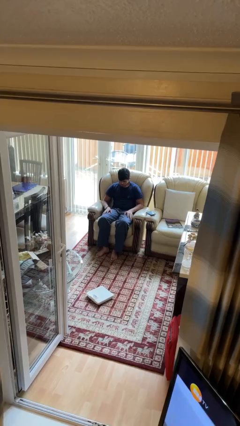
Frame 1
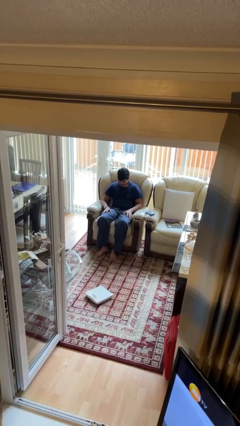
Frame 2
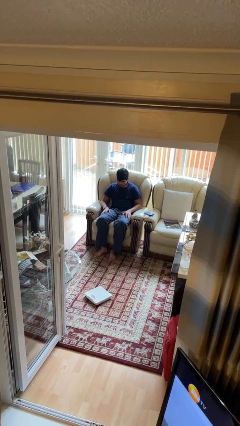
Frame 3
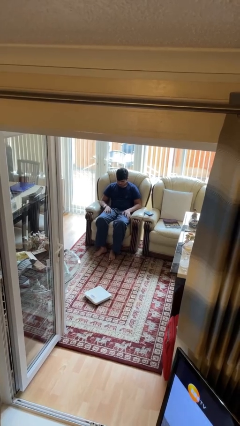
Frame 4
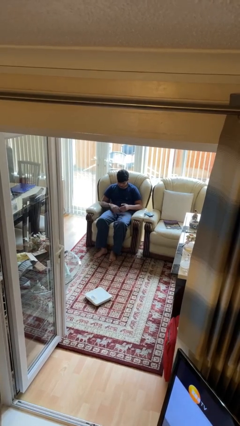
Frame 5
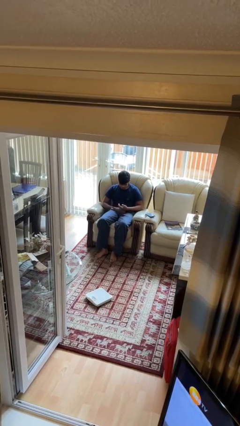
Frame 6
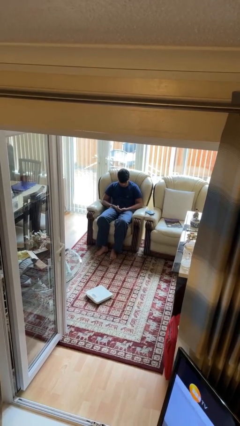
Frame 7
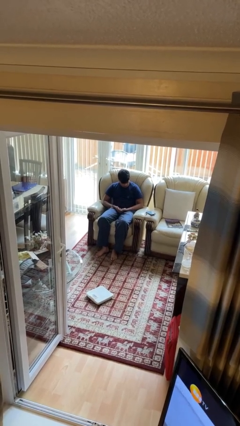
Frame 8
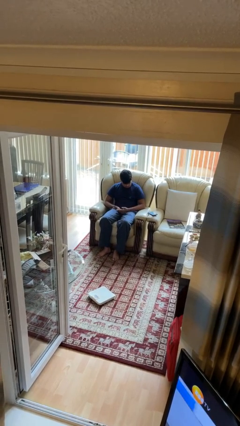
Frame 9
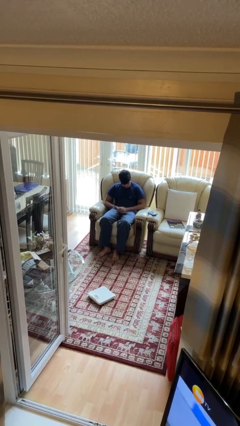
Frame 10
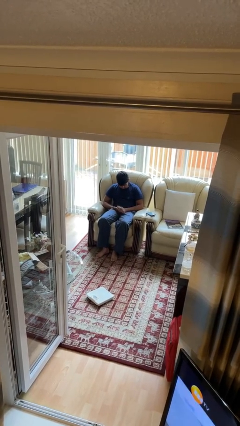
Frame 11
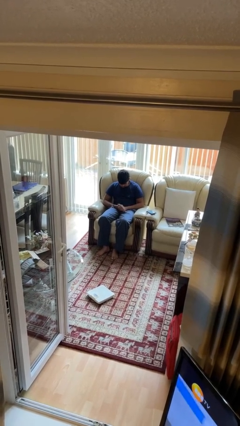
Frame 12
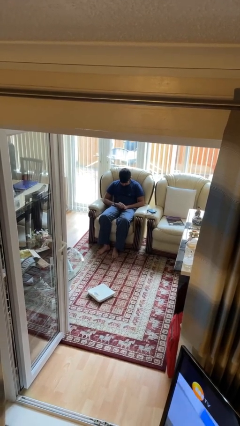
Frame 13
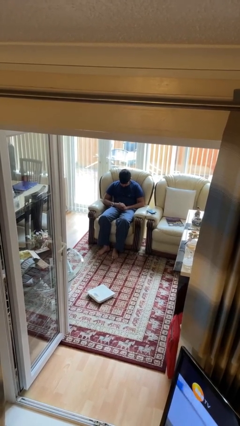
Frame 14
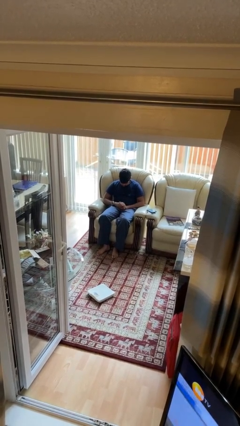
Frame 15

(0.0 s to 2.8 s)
person looks at hands in lap

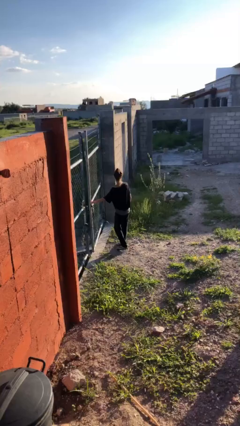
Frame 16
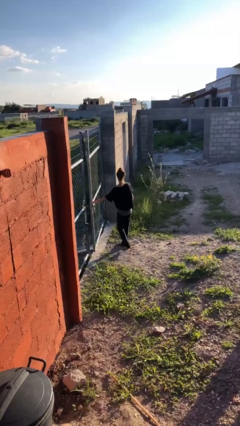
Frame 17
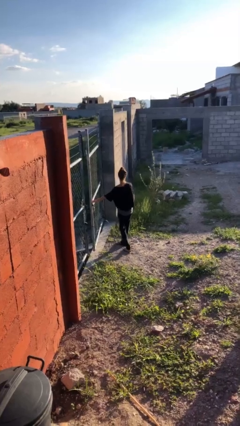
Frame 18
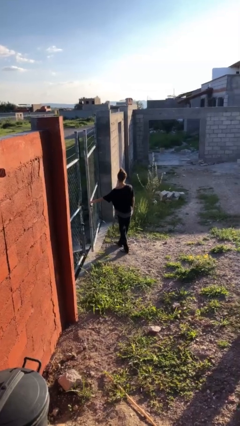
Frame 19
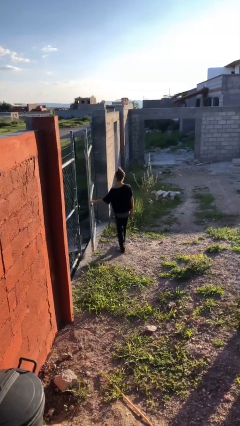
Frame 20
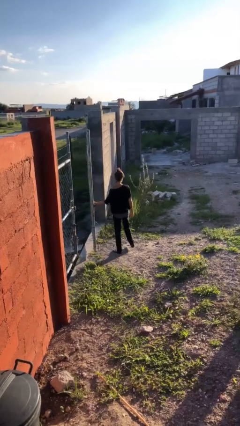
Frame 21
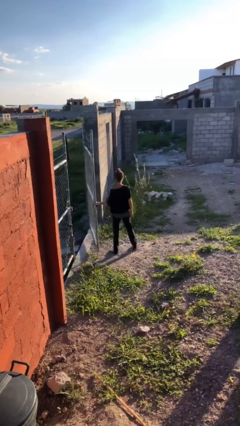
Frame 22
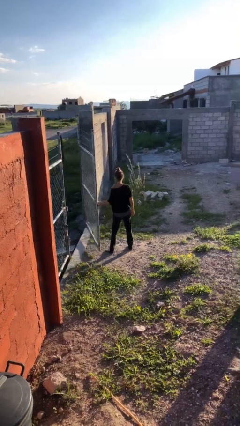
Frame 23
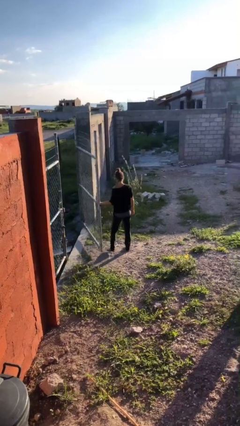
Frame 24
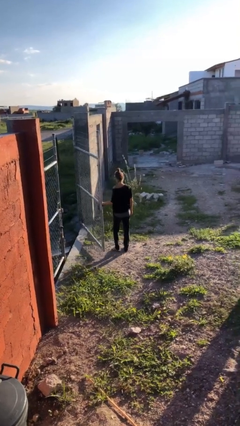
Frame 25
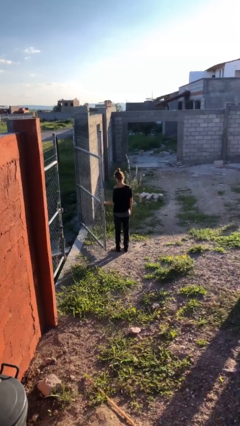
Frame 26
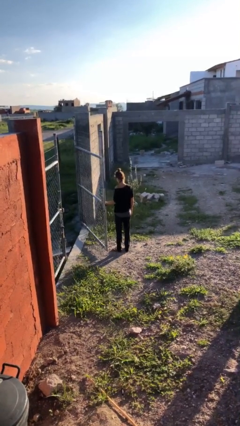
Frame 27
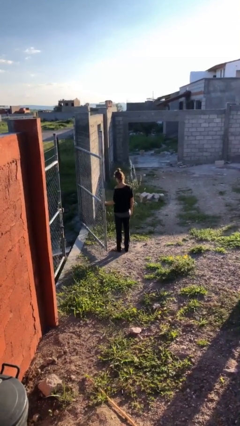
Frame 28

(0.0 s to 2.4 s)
person opens gate

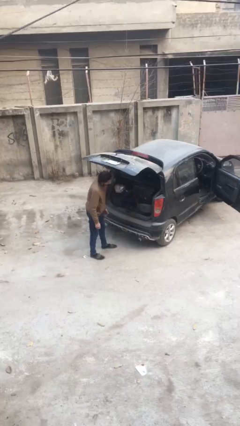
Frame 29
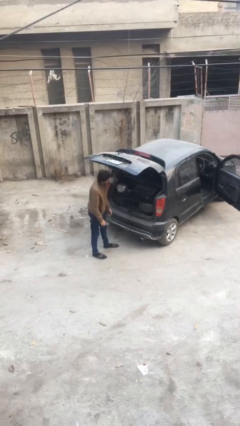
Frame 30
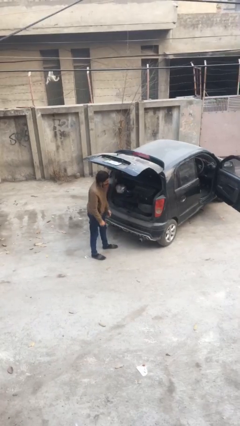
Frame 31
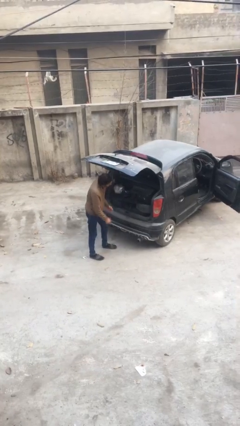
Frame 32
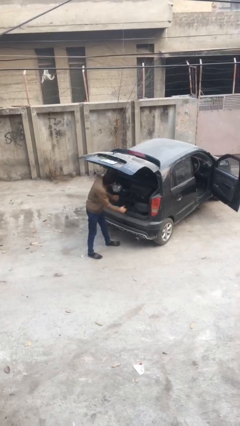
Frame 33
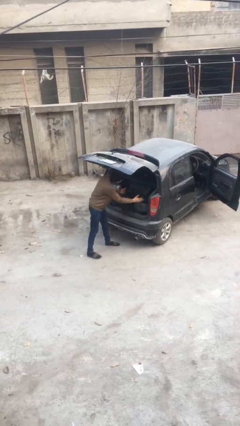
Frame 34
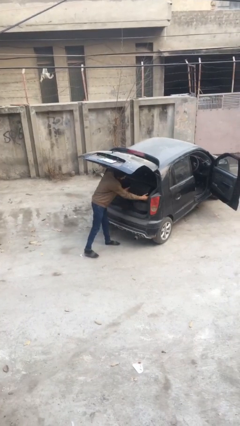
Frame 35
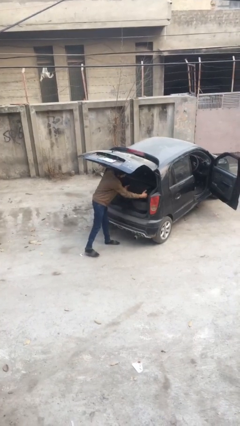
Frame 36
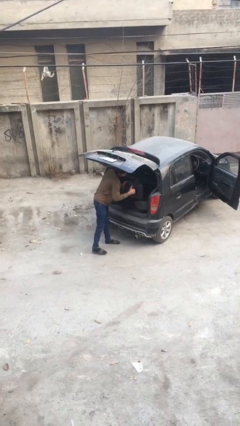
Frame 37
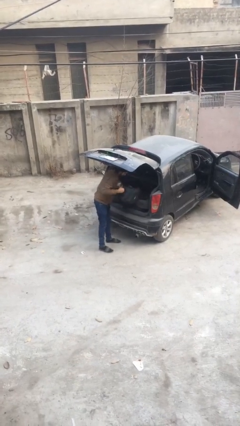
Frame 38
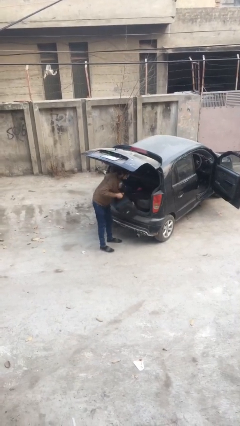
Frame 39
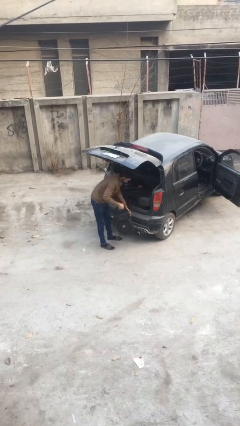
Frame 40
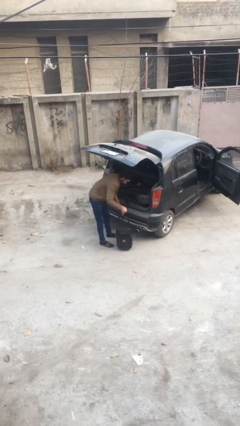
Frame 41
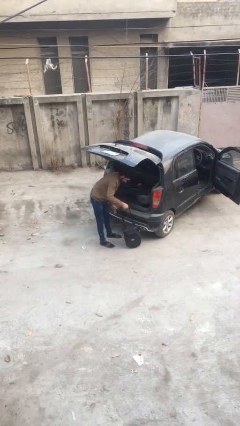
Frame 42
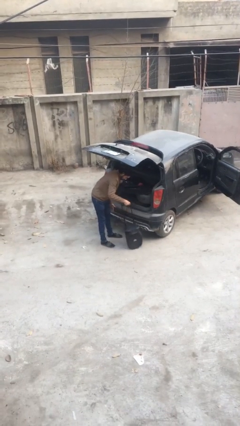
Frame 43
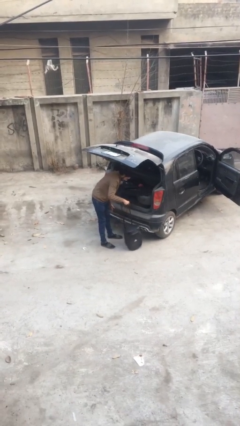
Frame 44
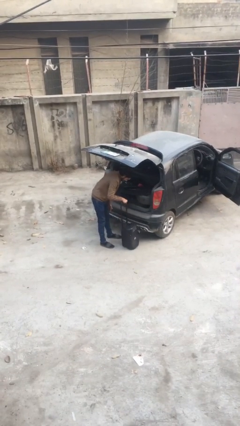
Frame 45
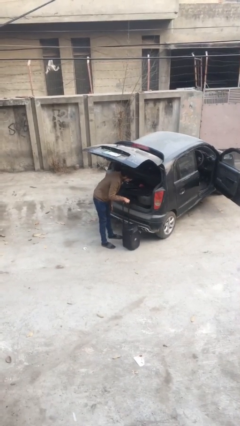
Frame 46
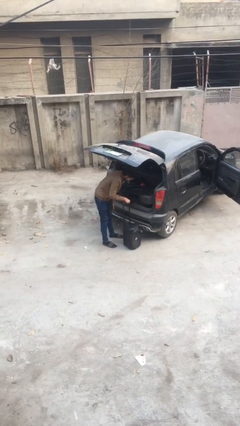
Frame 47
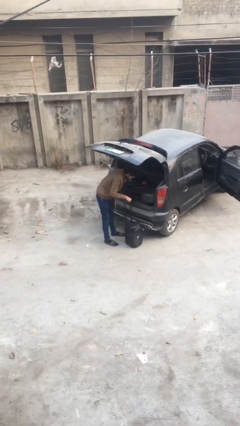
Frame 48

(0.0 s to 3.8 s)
person unloads car

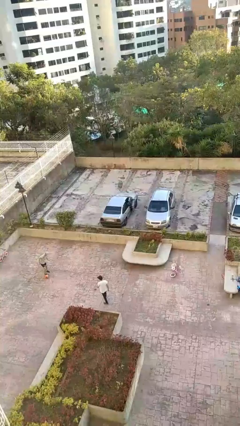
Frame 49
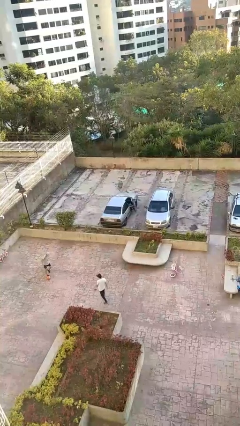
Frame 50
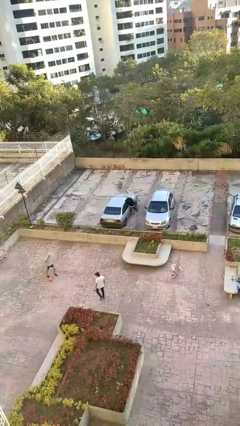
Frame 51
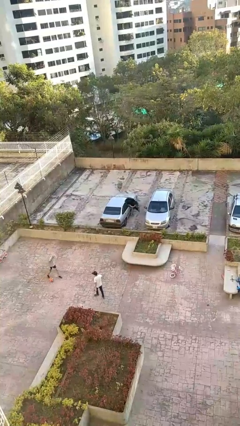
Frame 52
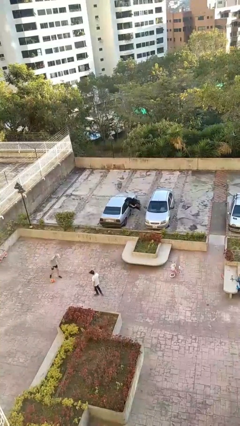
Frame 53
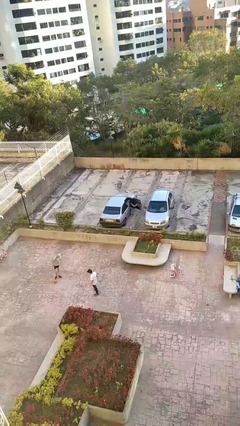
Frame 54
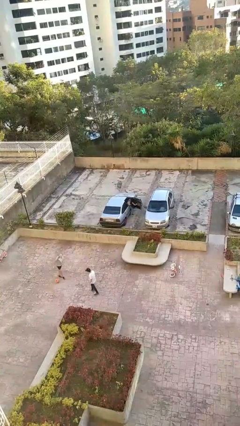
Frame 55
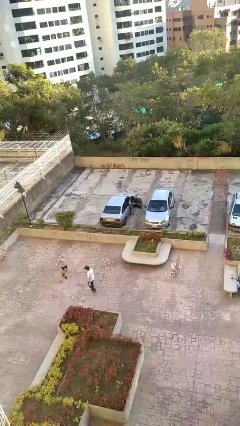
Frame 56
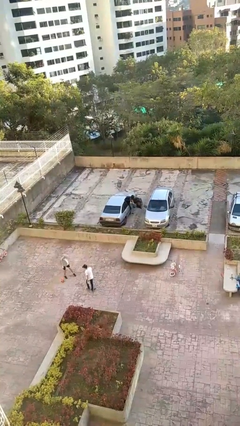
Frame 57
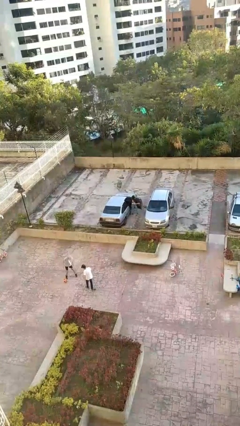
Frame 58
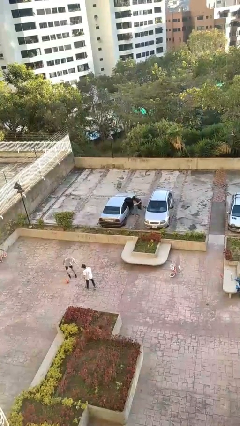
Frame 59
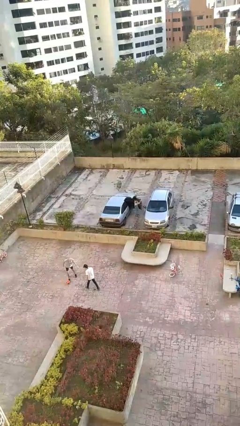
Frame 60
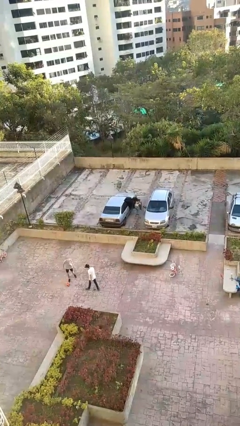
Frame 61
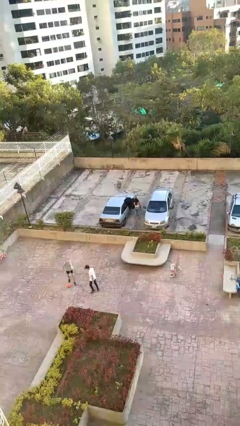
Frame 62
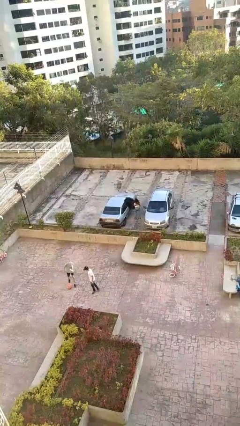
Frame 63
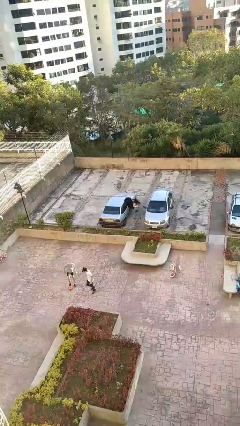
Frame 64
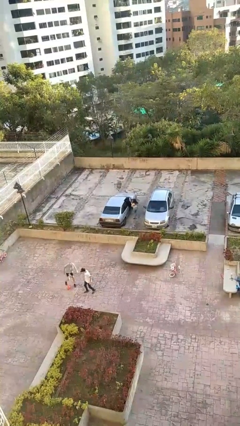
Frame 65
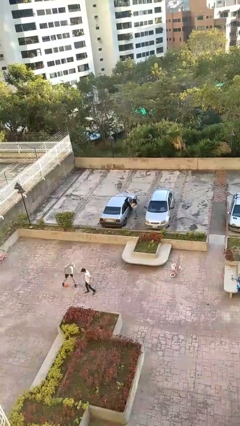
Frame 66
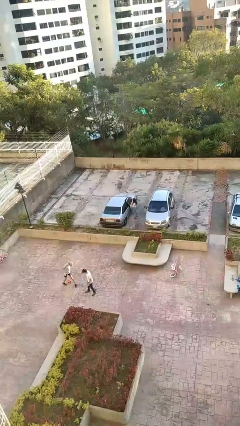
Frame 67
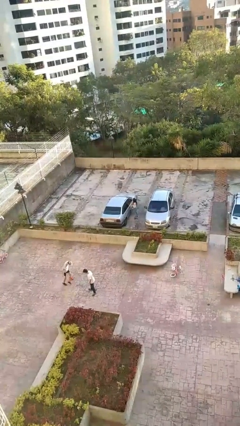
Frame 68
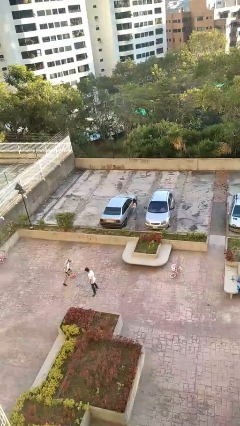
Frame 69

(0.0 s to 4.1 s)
car drops off person

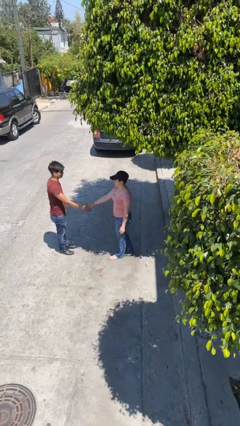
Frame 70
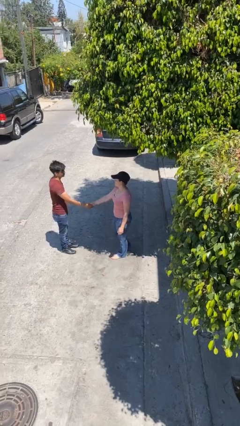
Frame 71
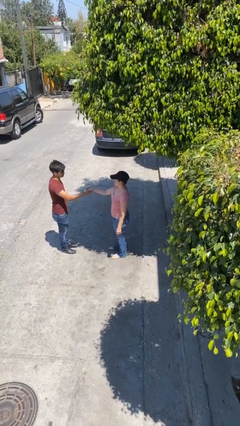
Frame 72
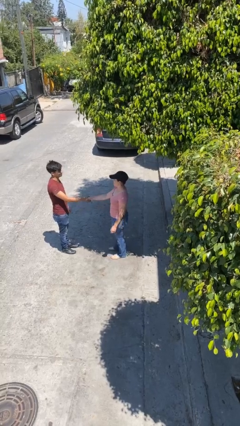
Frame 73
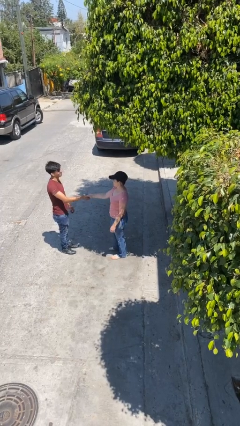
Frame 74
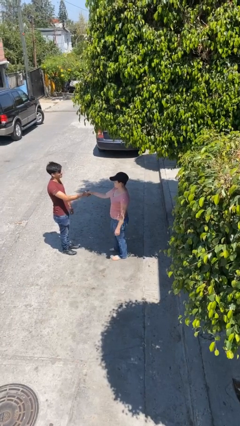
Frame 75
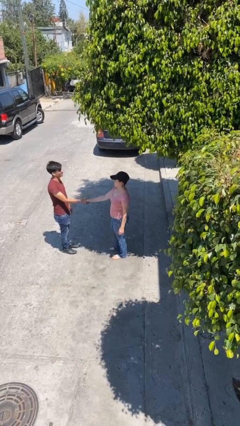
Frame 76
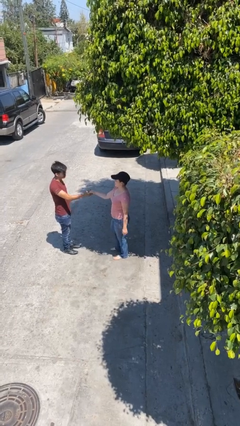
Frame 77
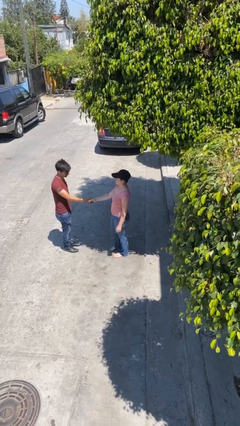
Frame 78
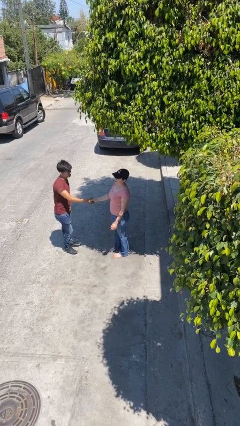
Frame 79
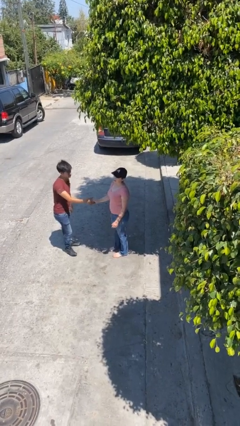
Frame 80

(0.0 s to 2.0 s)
person shakes hand

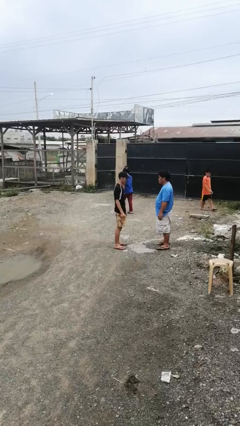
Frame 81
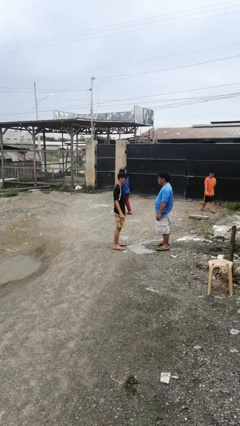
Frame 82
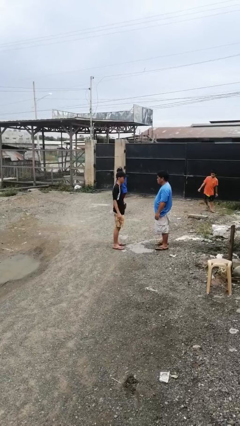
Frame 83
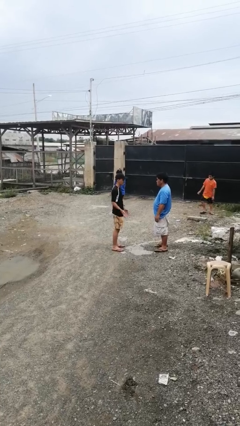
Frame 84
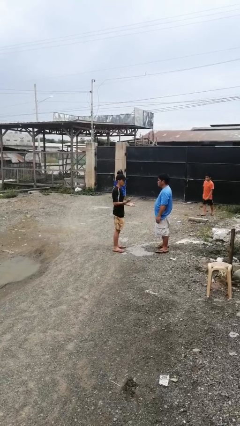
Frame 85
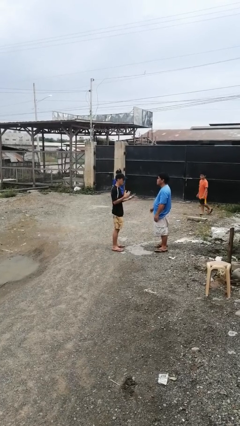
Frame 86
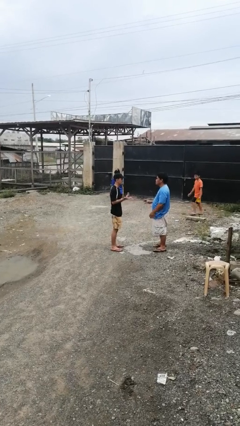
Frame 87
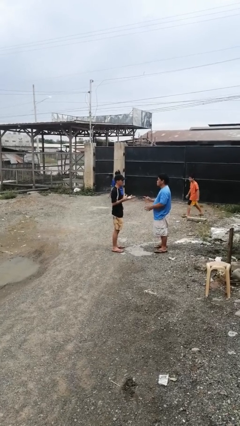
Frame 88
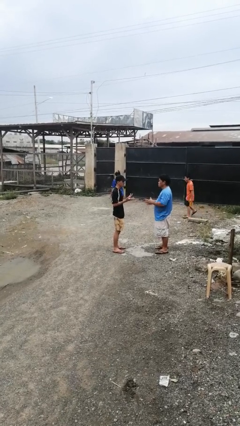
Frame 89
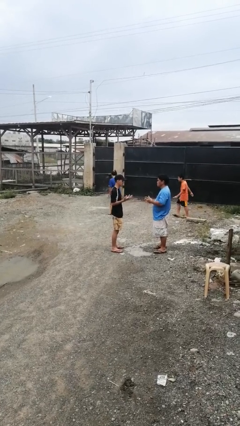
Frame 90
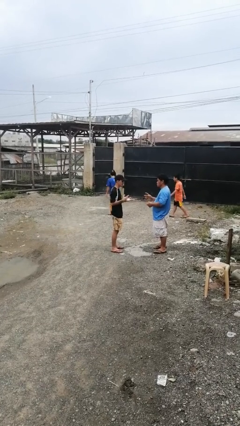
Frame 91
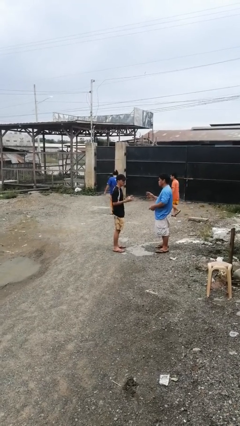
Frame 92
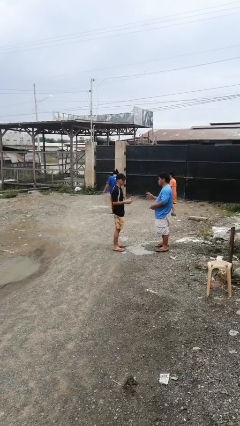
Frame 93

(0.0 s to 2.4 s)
person talks to person
